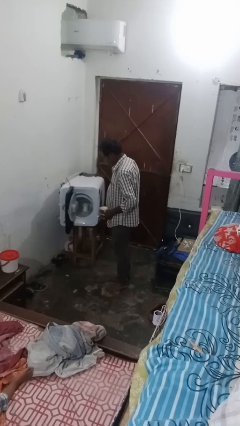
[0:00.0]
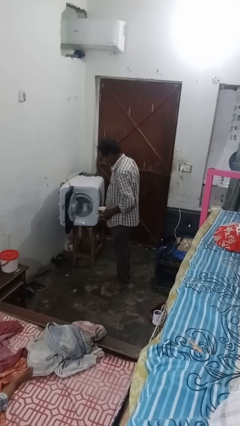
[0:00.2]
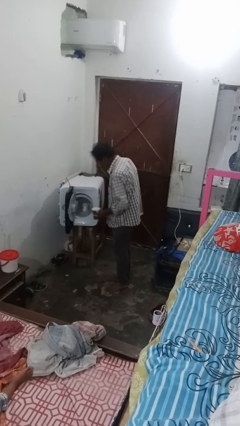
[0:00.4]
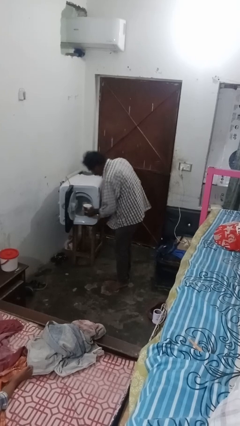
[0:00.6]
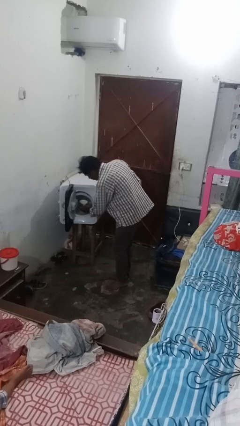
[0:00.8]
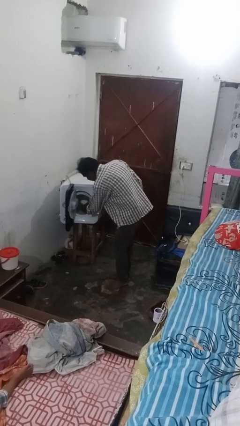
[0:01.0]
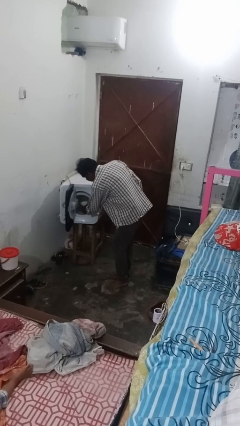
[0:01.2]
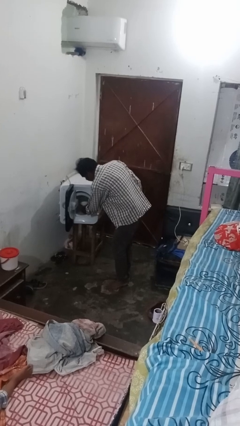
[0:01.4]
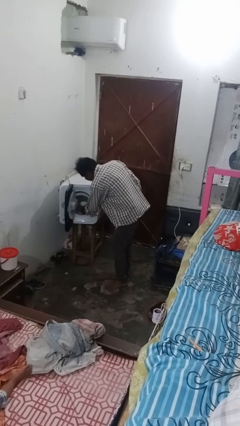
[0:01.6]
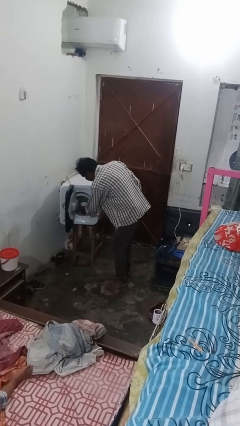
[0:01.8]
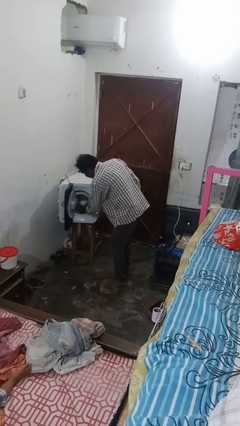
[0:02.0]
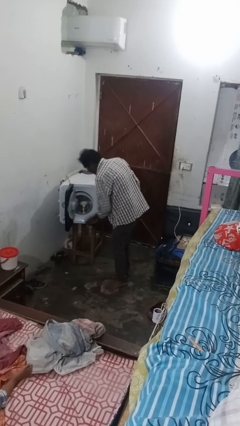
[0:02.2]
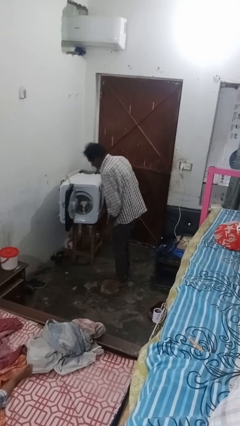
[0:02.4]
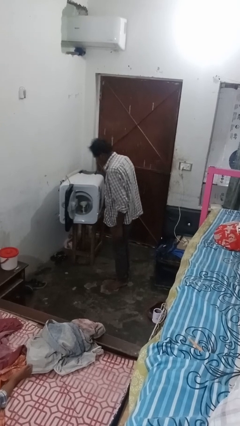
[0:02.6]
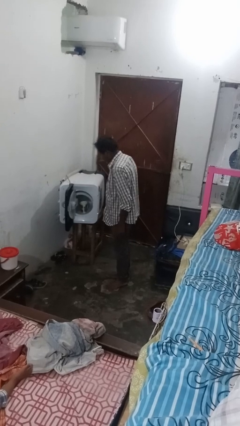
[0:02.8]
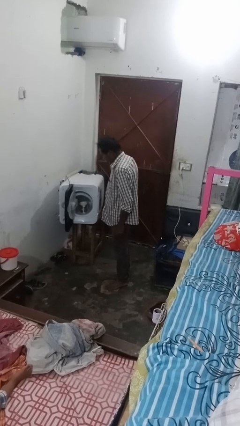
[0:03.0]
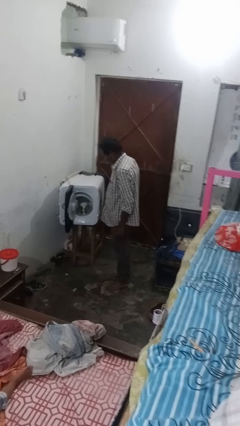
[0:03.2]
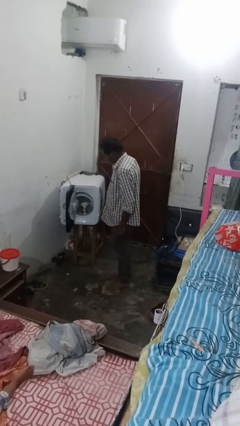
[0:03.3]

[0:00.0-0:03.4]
person loads dishwasher

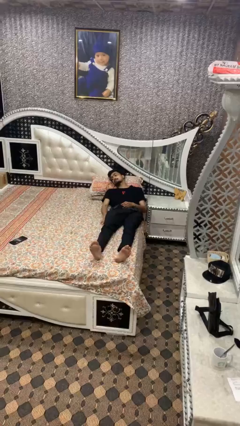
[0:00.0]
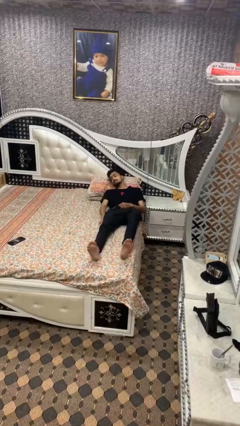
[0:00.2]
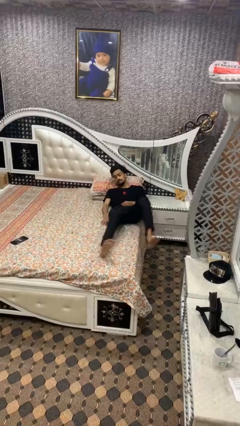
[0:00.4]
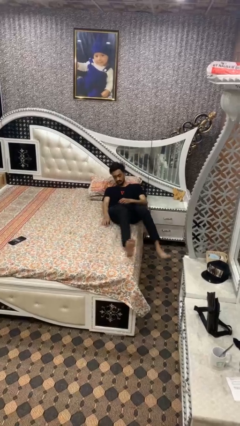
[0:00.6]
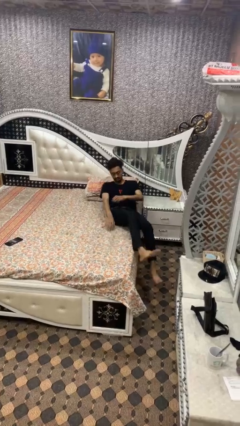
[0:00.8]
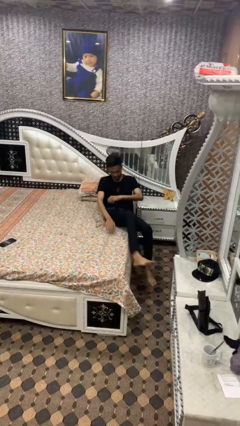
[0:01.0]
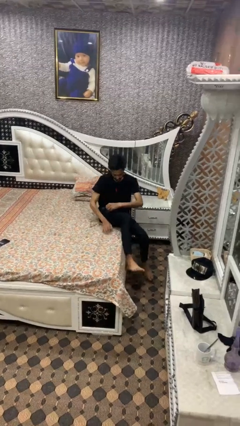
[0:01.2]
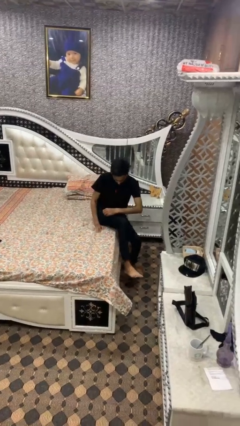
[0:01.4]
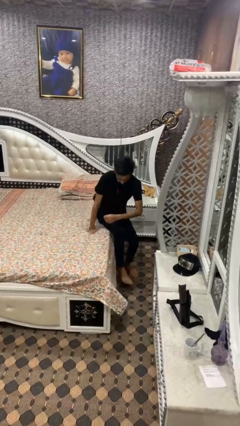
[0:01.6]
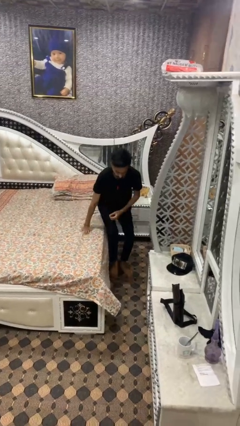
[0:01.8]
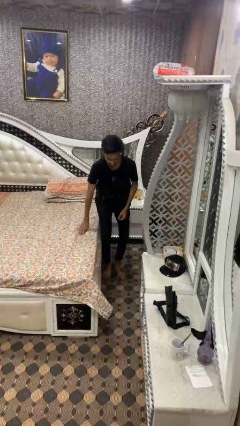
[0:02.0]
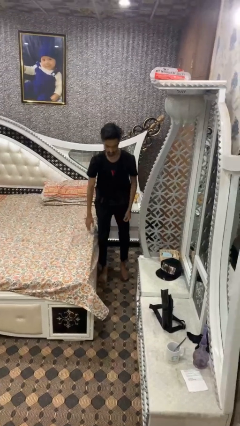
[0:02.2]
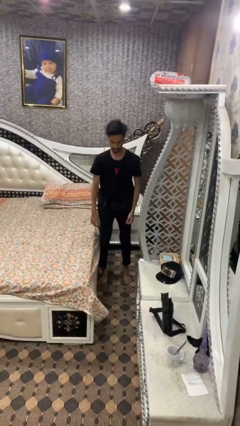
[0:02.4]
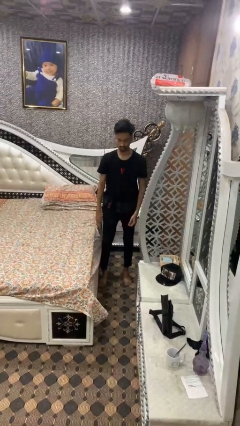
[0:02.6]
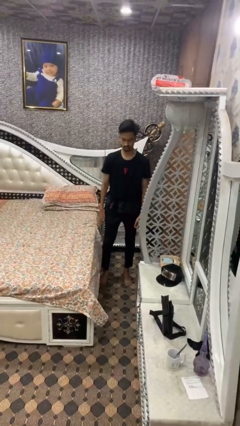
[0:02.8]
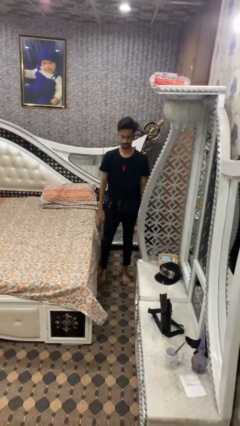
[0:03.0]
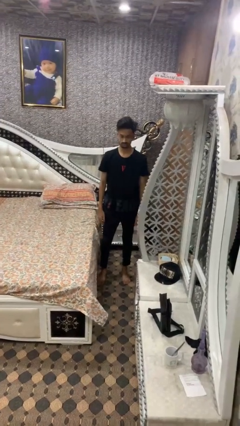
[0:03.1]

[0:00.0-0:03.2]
person stands up

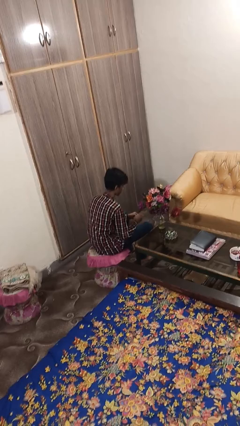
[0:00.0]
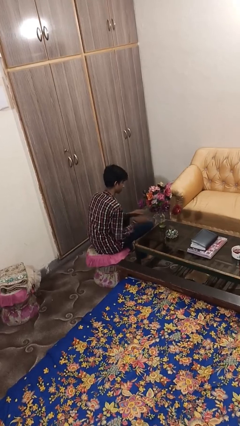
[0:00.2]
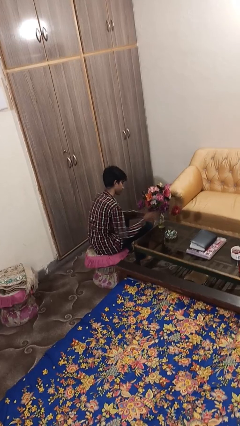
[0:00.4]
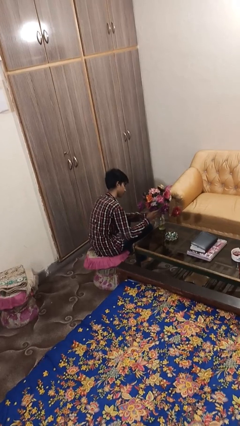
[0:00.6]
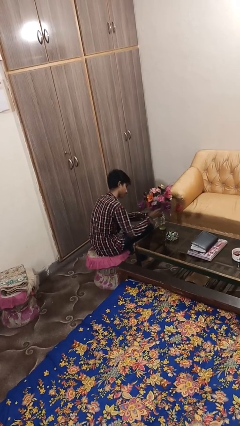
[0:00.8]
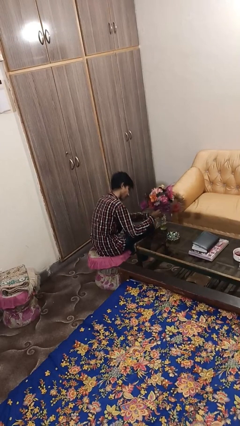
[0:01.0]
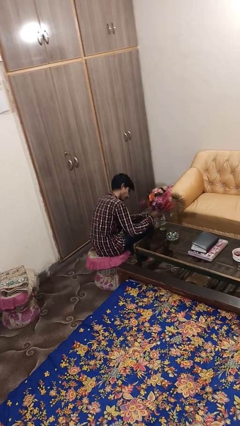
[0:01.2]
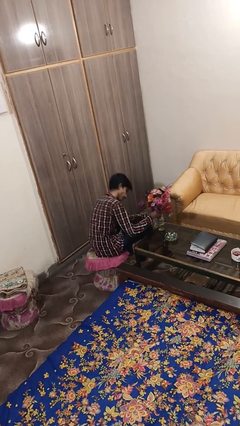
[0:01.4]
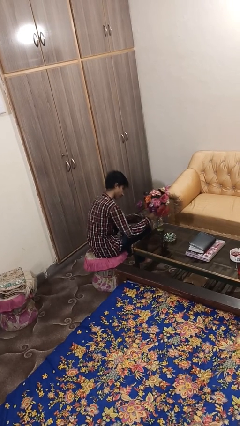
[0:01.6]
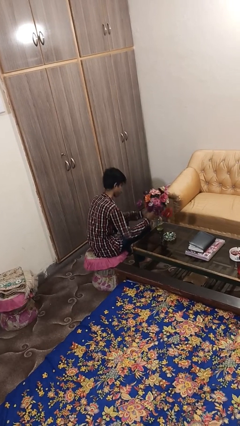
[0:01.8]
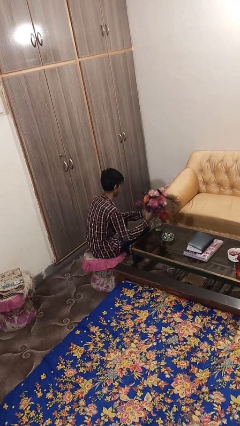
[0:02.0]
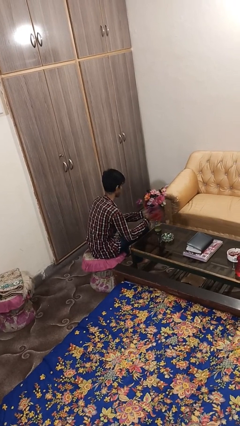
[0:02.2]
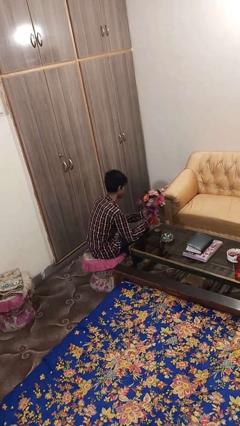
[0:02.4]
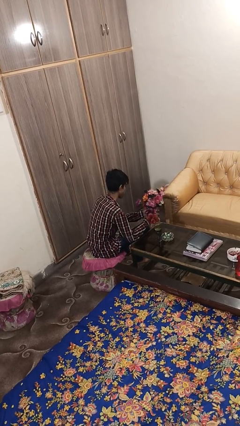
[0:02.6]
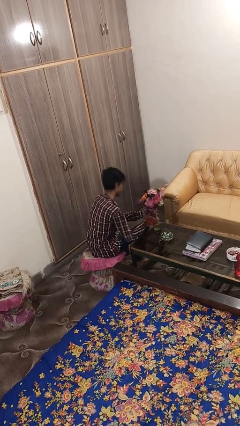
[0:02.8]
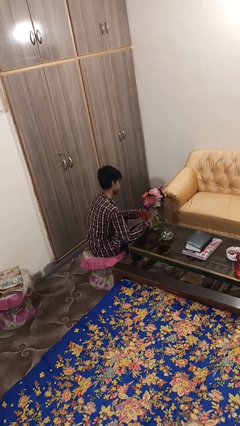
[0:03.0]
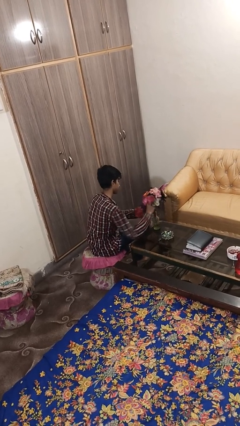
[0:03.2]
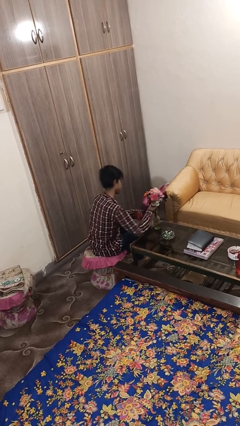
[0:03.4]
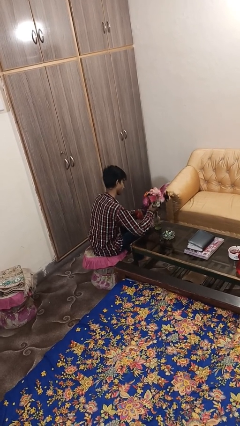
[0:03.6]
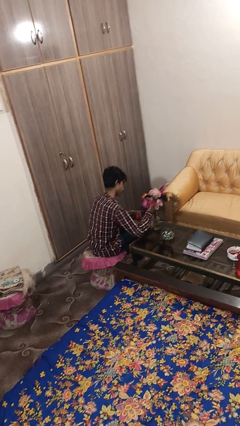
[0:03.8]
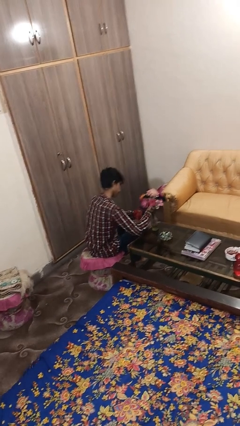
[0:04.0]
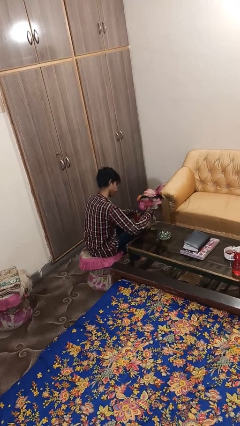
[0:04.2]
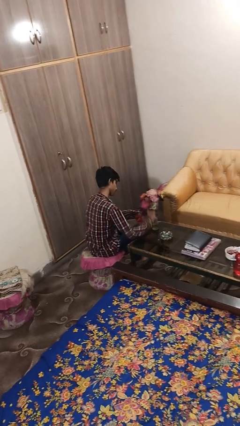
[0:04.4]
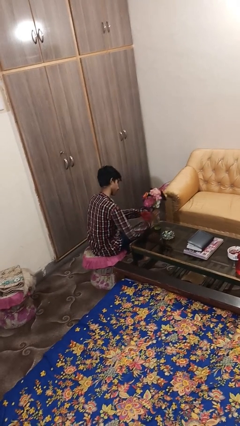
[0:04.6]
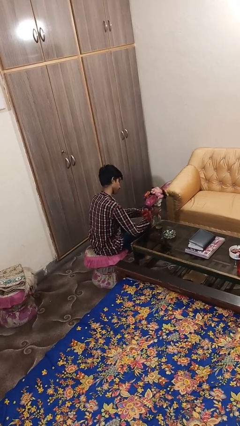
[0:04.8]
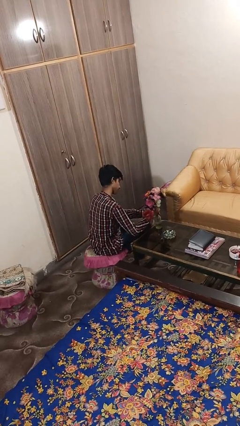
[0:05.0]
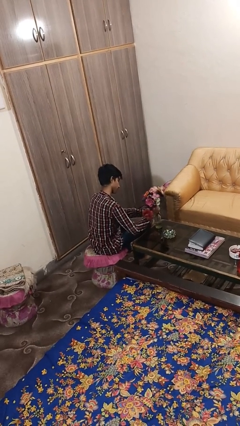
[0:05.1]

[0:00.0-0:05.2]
person arranges flowers in vase

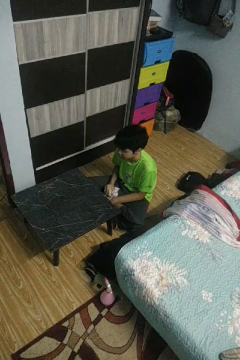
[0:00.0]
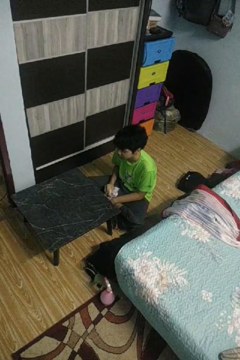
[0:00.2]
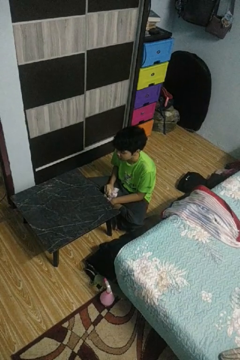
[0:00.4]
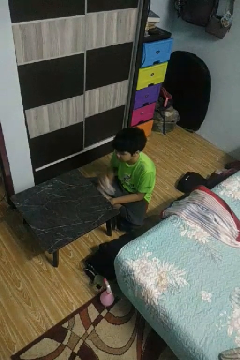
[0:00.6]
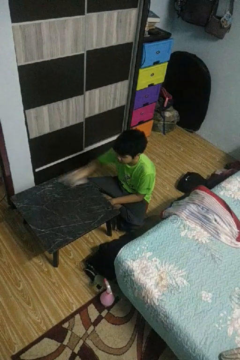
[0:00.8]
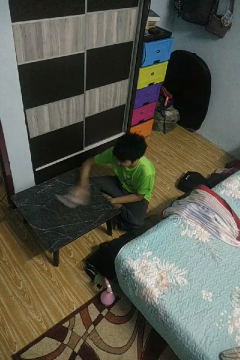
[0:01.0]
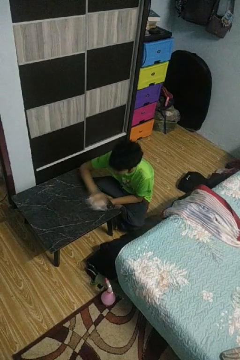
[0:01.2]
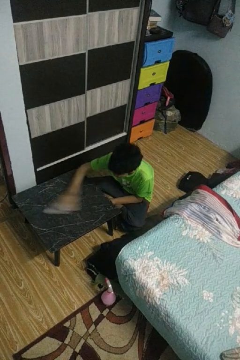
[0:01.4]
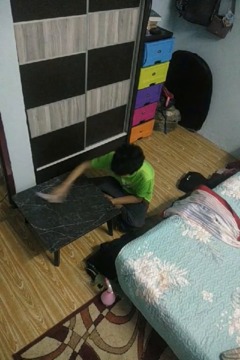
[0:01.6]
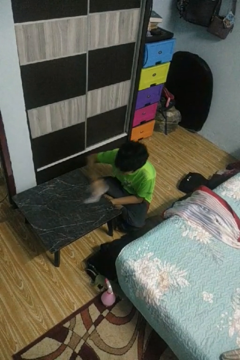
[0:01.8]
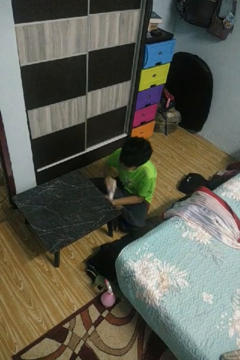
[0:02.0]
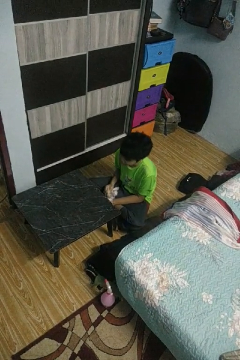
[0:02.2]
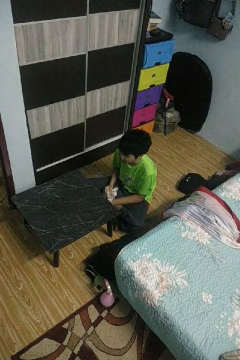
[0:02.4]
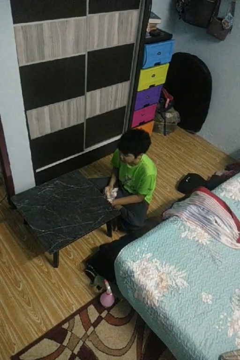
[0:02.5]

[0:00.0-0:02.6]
person cleans table with rag

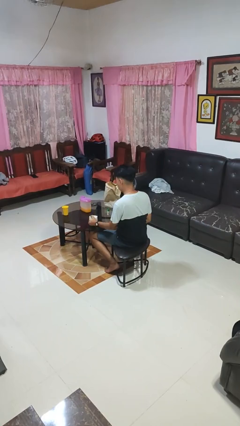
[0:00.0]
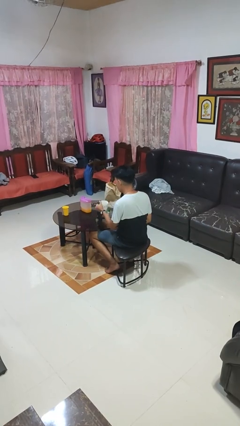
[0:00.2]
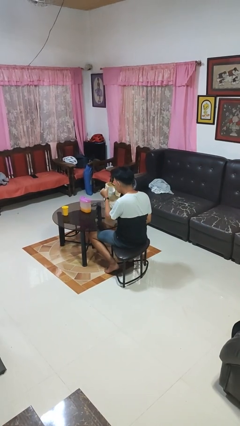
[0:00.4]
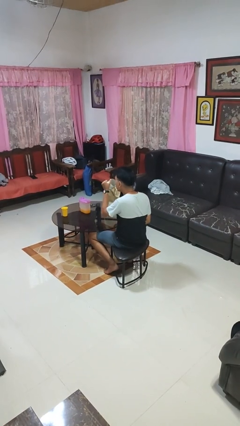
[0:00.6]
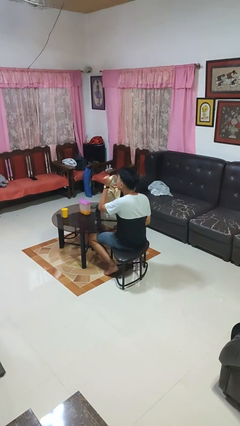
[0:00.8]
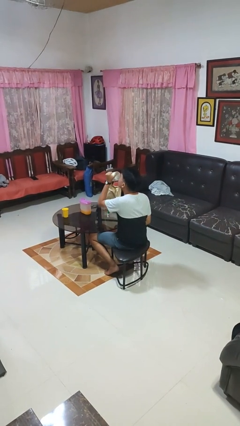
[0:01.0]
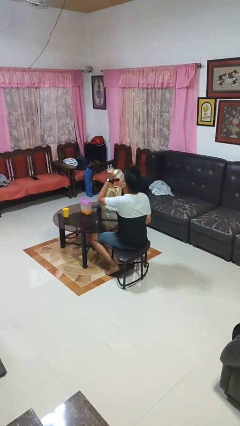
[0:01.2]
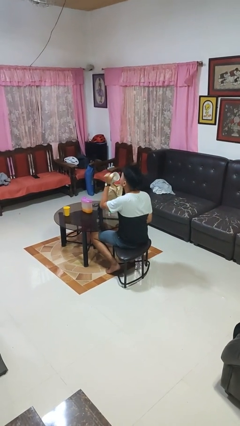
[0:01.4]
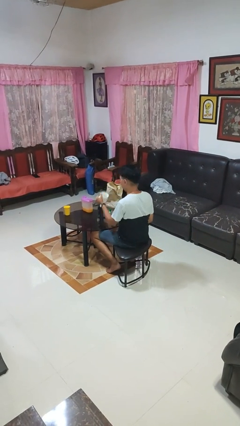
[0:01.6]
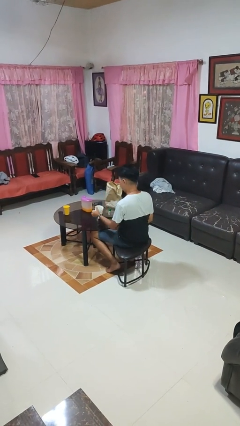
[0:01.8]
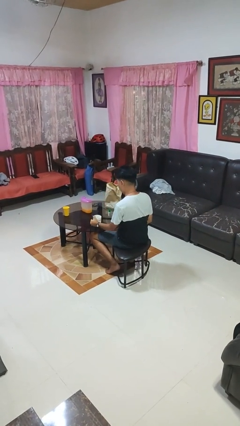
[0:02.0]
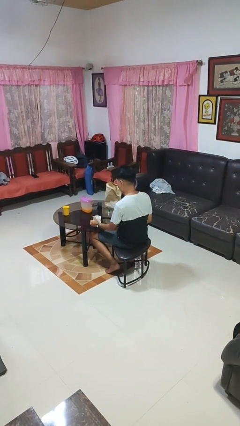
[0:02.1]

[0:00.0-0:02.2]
person drinks from mug

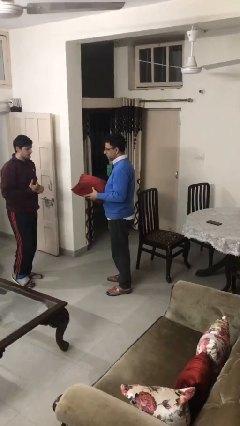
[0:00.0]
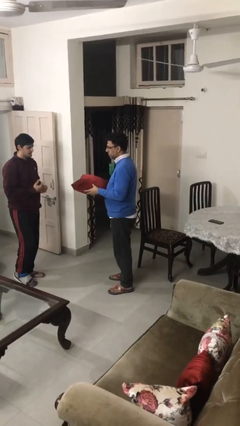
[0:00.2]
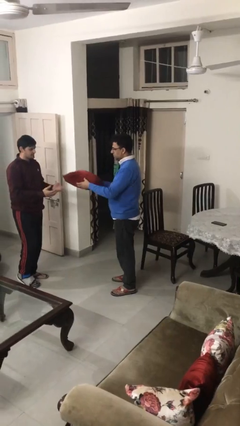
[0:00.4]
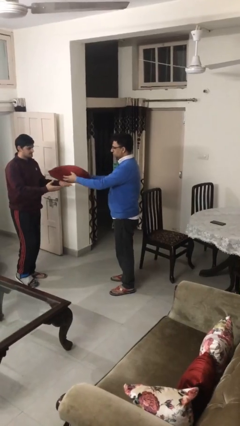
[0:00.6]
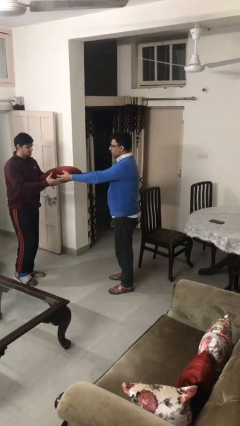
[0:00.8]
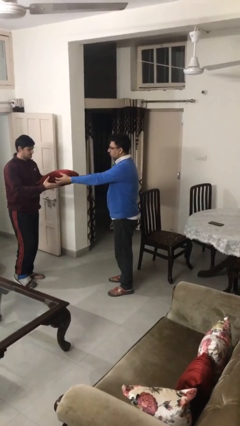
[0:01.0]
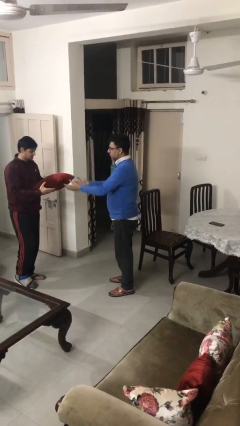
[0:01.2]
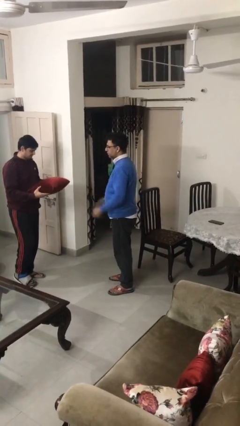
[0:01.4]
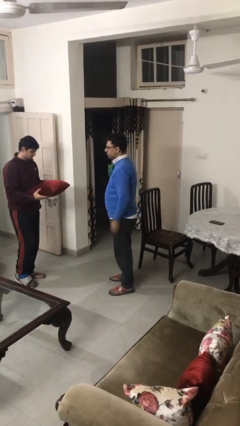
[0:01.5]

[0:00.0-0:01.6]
person transfers object to person
